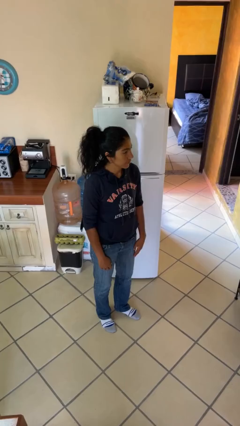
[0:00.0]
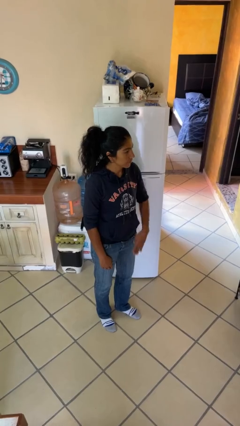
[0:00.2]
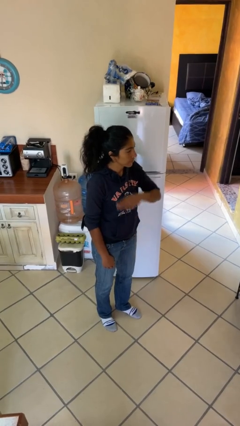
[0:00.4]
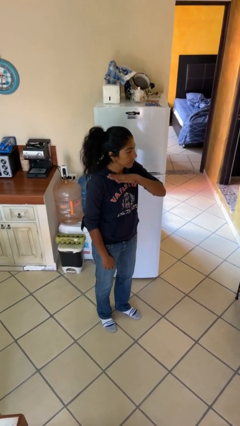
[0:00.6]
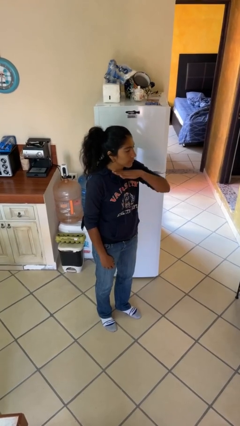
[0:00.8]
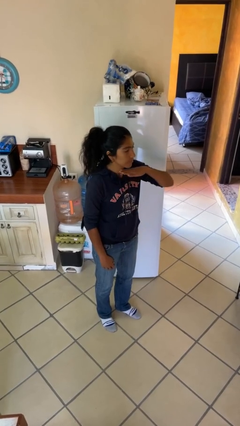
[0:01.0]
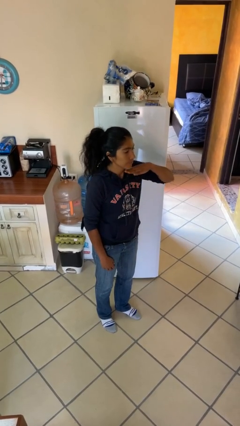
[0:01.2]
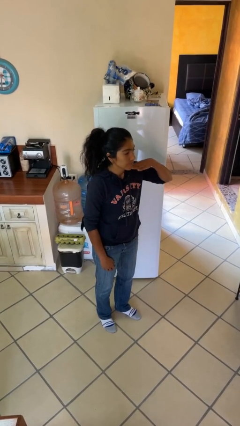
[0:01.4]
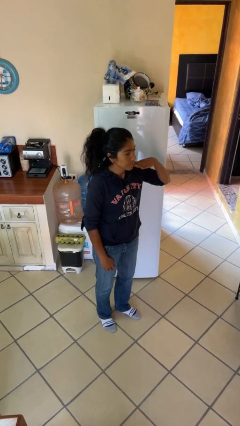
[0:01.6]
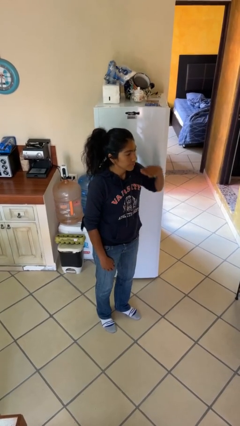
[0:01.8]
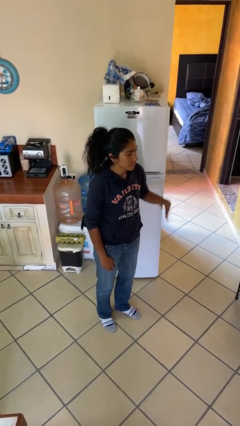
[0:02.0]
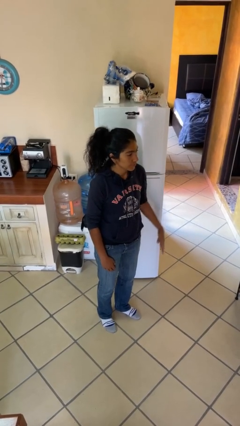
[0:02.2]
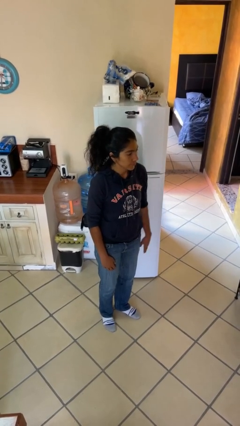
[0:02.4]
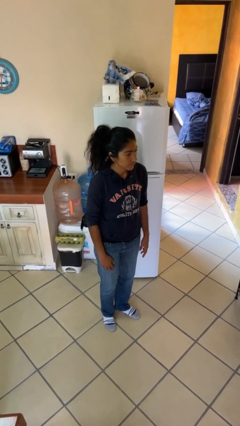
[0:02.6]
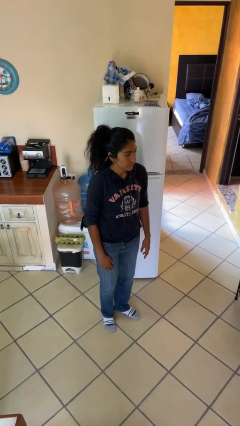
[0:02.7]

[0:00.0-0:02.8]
person gestures cut

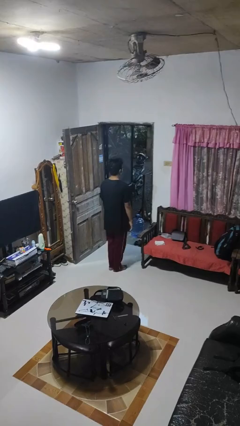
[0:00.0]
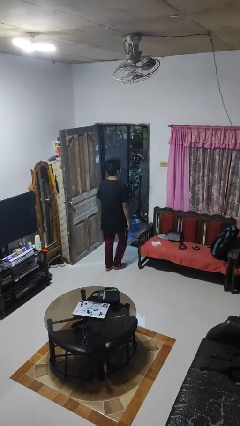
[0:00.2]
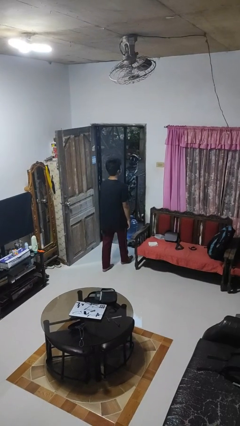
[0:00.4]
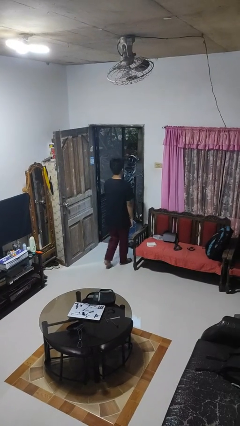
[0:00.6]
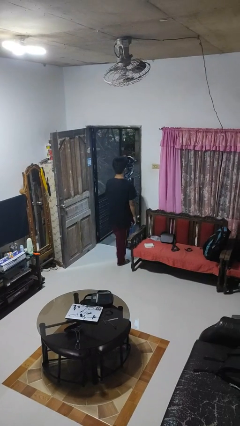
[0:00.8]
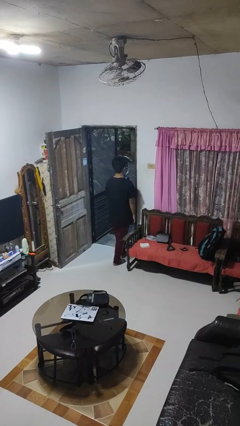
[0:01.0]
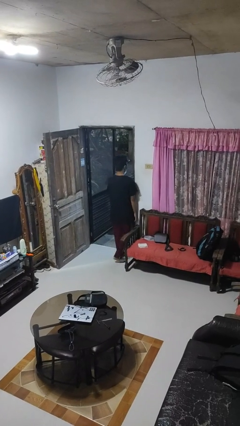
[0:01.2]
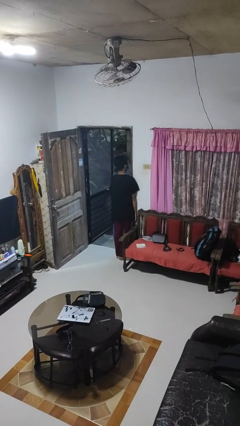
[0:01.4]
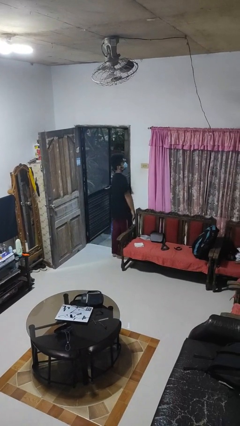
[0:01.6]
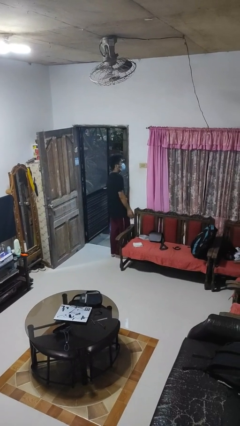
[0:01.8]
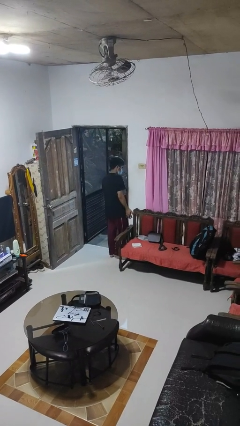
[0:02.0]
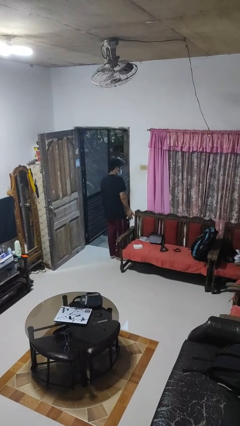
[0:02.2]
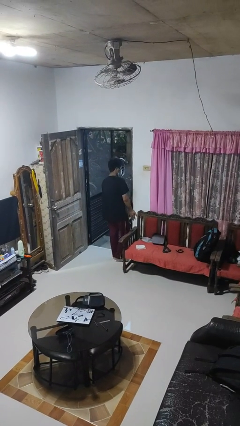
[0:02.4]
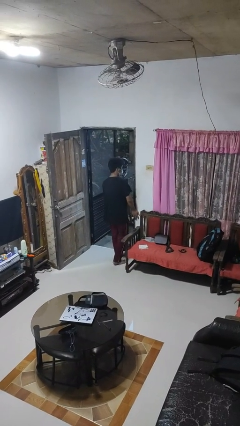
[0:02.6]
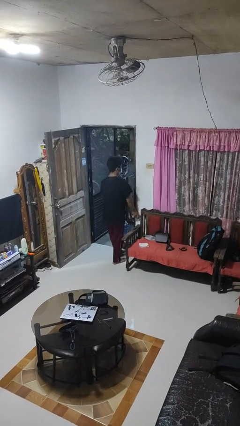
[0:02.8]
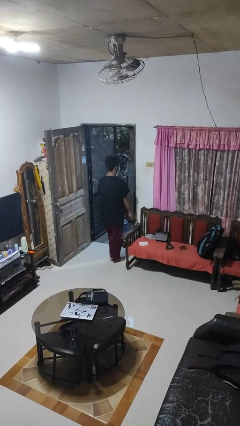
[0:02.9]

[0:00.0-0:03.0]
person bumps into wall

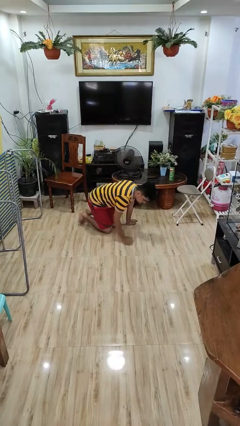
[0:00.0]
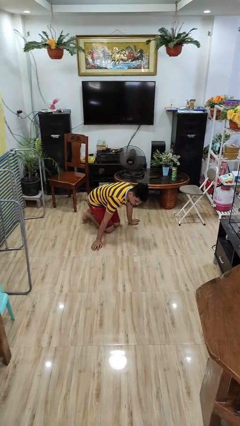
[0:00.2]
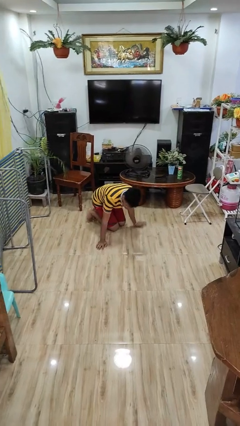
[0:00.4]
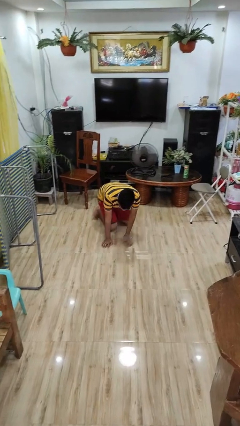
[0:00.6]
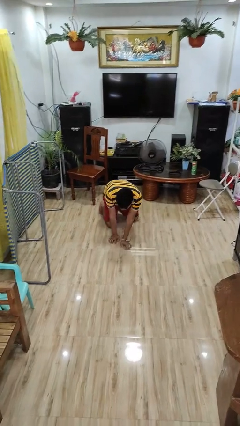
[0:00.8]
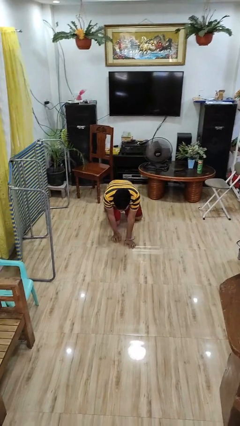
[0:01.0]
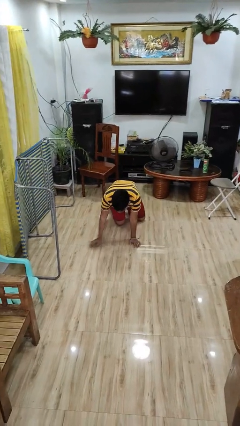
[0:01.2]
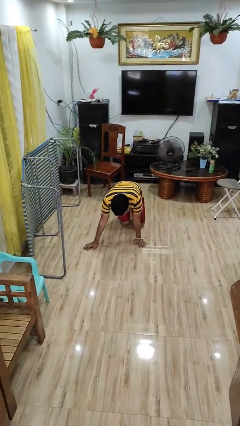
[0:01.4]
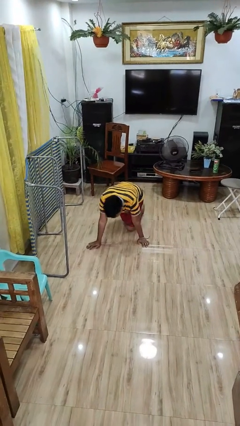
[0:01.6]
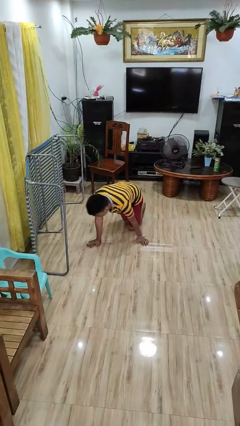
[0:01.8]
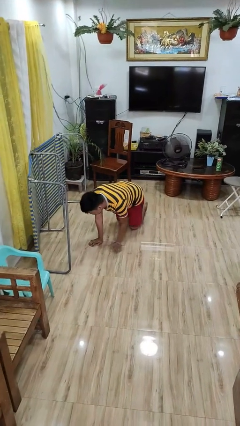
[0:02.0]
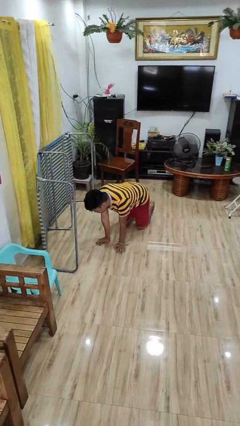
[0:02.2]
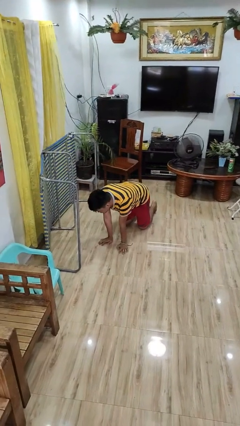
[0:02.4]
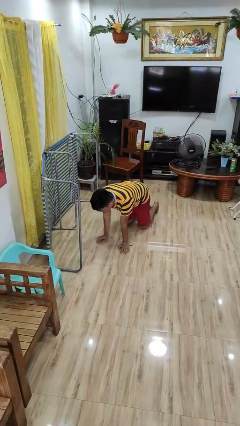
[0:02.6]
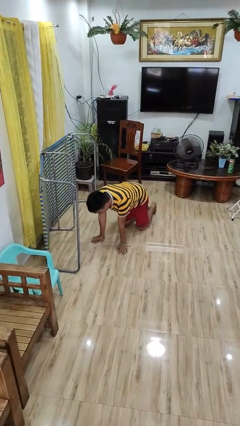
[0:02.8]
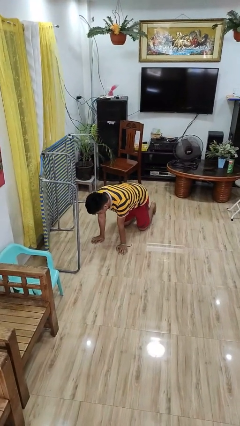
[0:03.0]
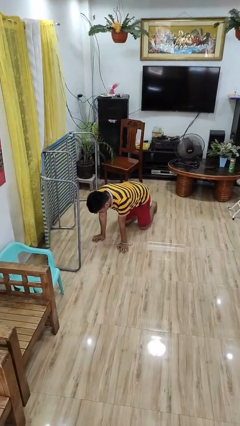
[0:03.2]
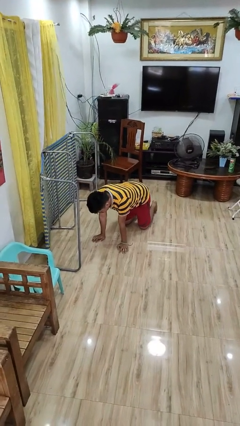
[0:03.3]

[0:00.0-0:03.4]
person crawls

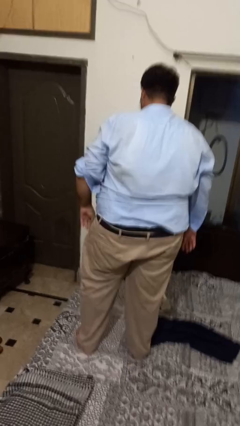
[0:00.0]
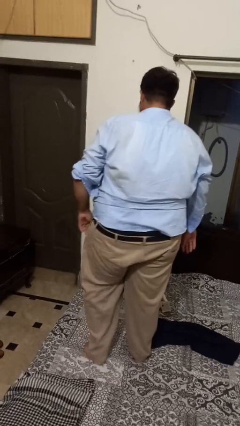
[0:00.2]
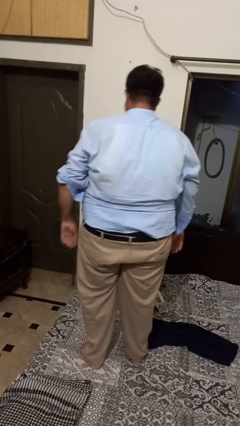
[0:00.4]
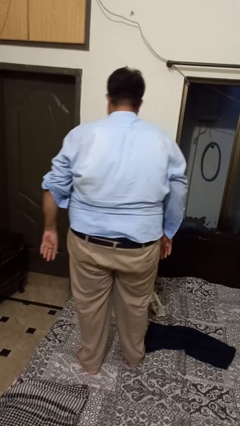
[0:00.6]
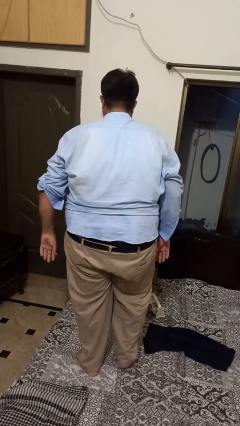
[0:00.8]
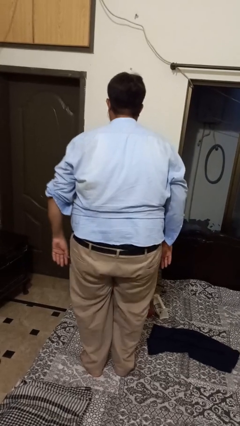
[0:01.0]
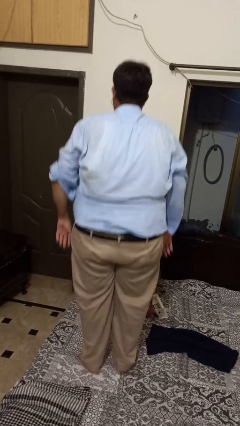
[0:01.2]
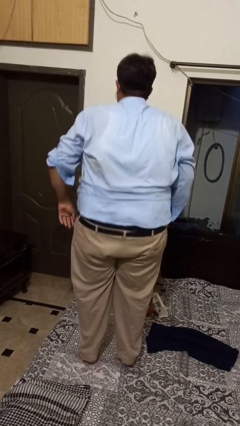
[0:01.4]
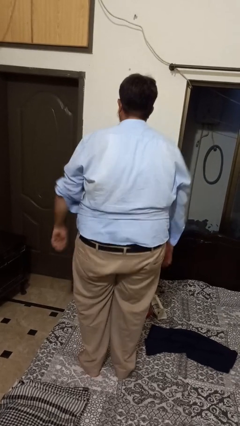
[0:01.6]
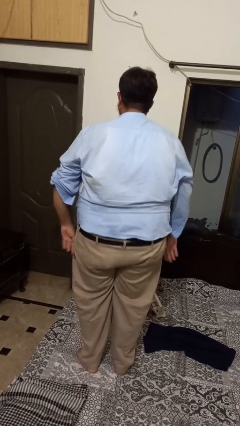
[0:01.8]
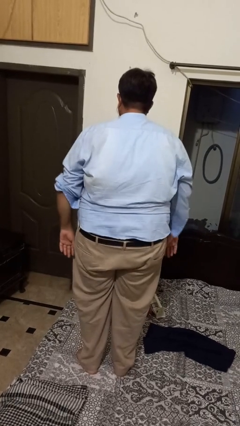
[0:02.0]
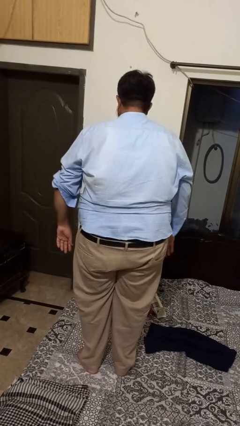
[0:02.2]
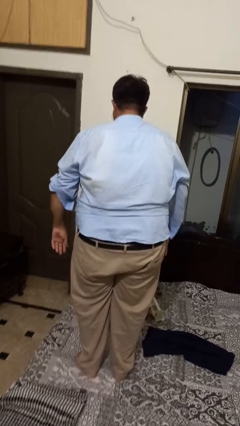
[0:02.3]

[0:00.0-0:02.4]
person jumps on bed

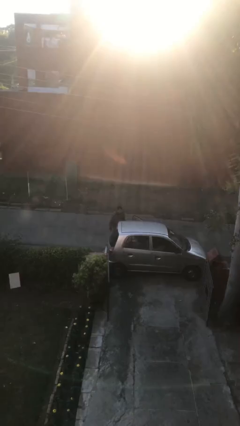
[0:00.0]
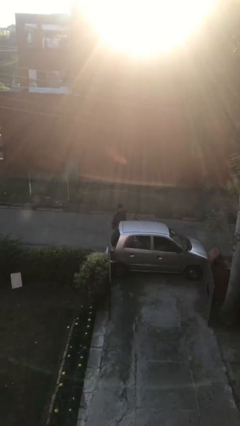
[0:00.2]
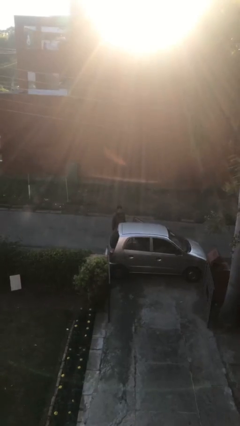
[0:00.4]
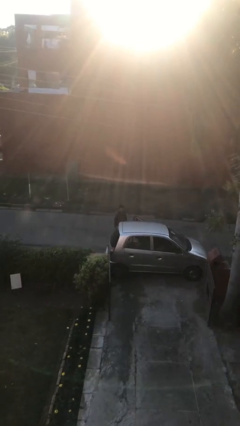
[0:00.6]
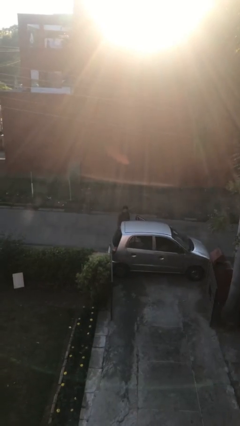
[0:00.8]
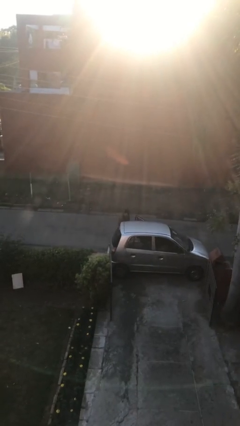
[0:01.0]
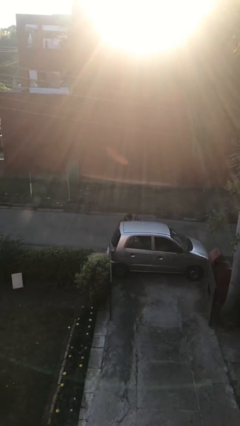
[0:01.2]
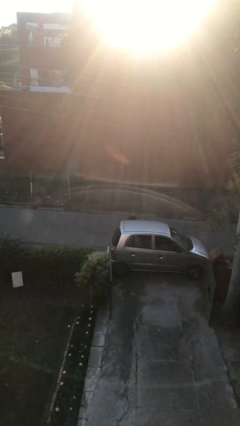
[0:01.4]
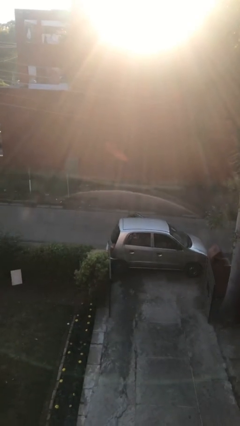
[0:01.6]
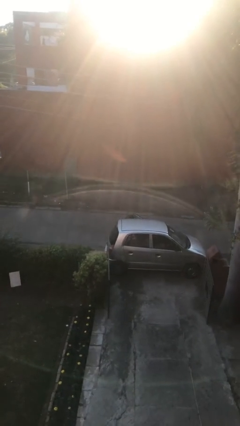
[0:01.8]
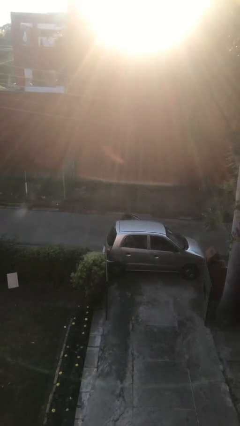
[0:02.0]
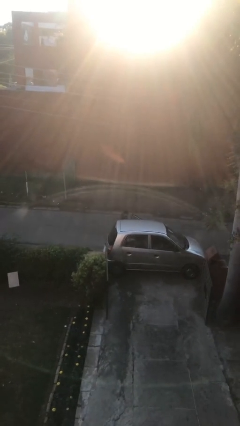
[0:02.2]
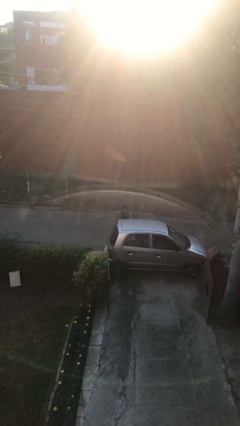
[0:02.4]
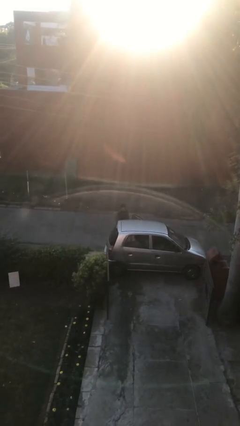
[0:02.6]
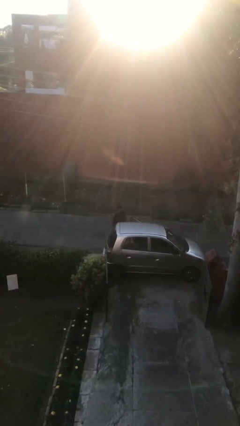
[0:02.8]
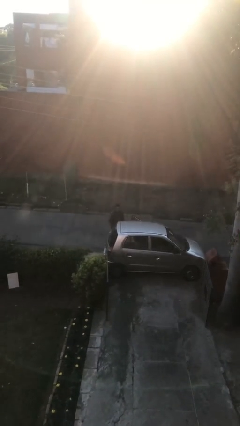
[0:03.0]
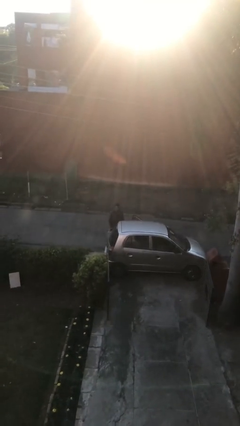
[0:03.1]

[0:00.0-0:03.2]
person unloads car

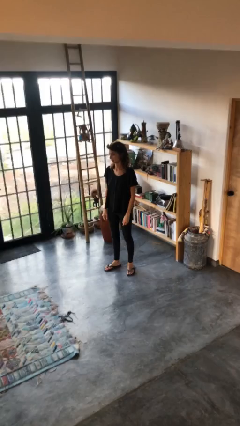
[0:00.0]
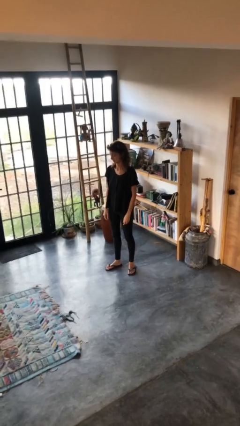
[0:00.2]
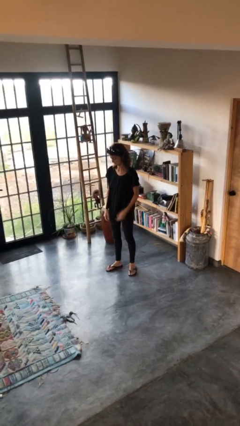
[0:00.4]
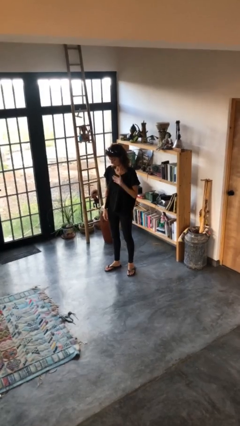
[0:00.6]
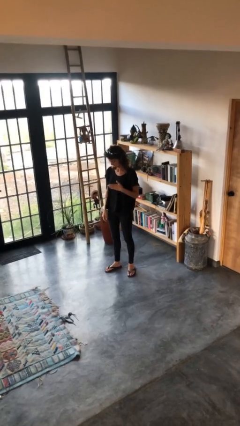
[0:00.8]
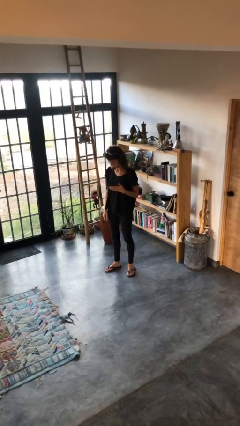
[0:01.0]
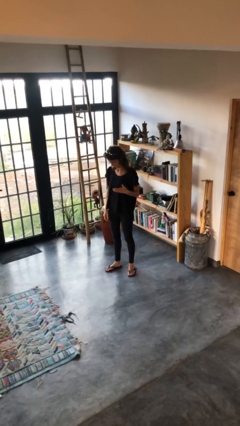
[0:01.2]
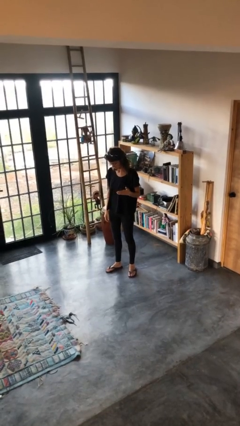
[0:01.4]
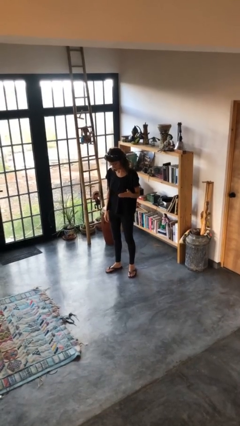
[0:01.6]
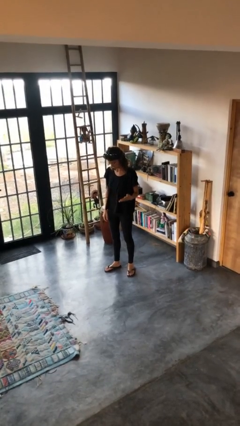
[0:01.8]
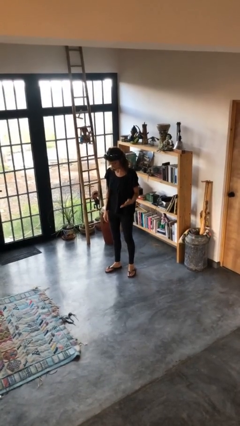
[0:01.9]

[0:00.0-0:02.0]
person swats bug

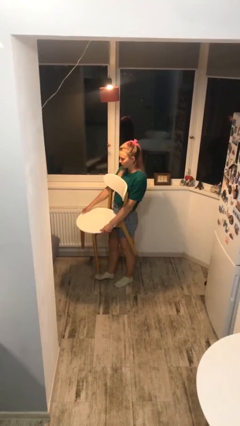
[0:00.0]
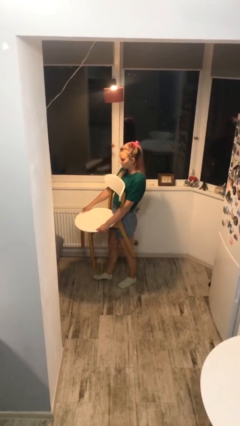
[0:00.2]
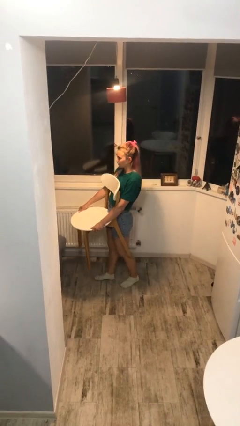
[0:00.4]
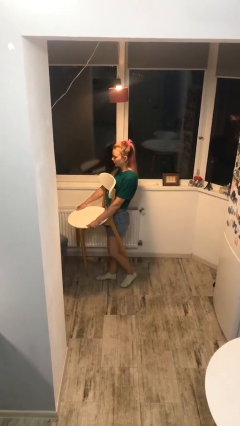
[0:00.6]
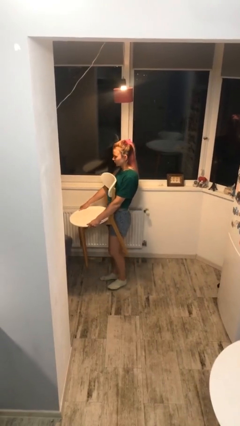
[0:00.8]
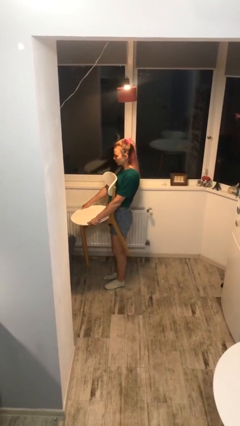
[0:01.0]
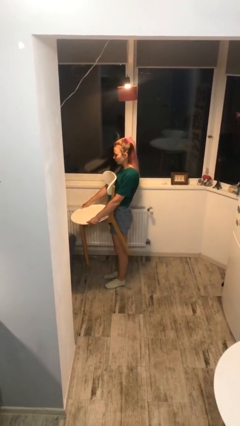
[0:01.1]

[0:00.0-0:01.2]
person carries furniture
